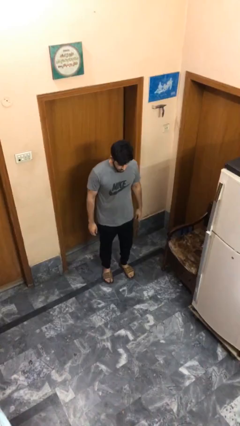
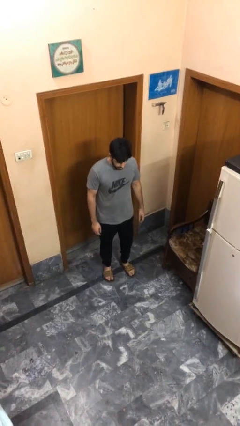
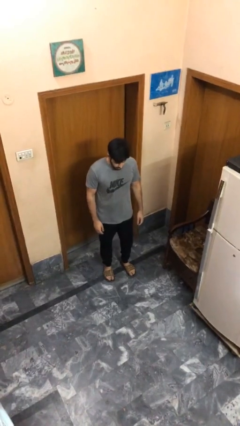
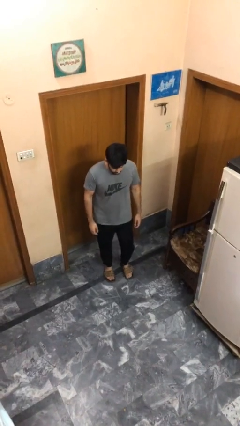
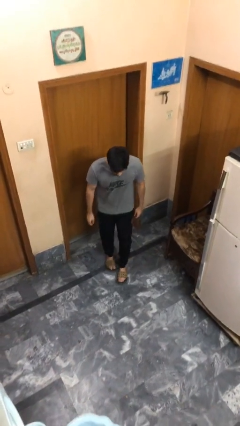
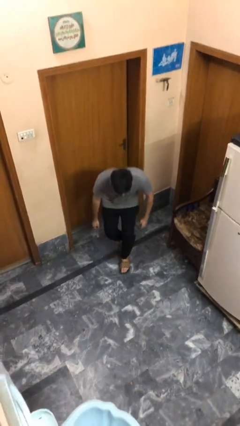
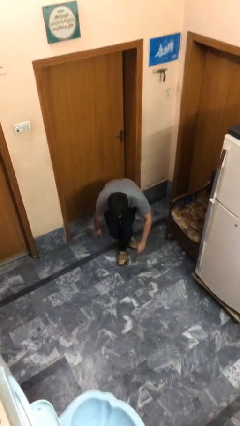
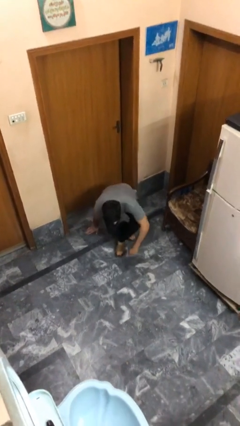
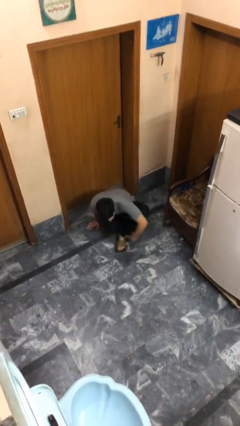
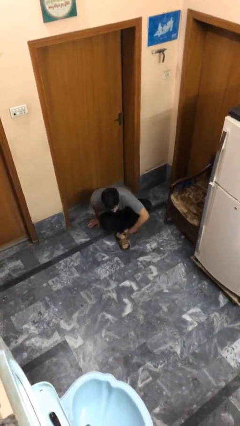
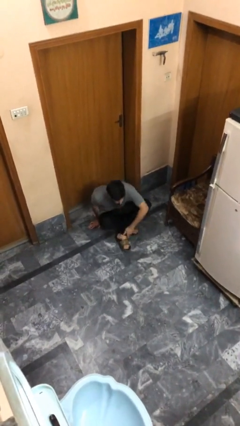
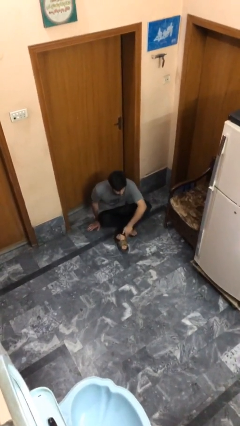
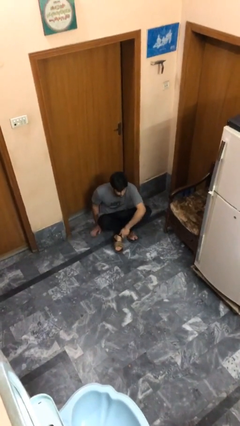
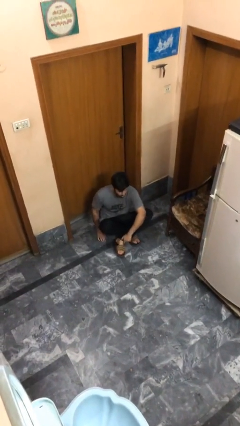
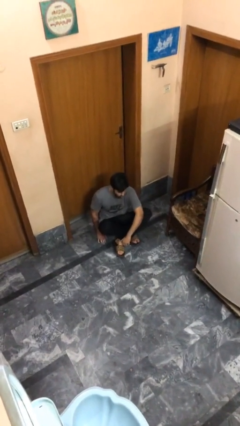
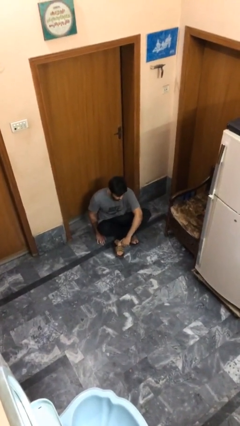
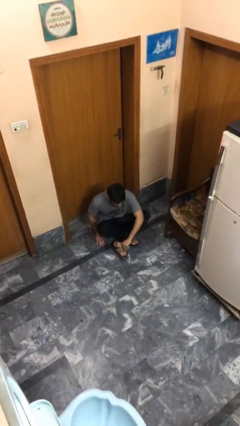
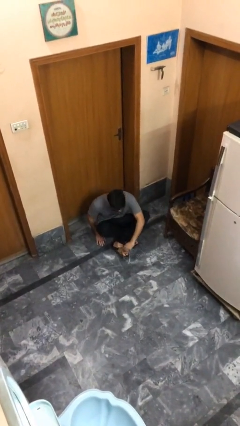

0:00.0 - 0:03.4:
person sits crisscross

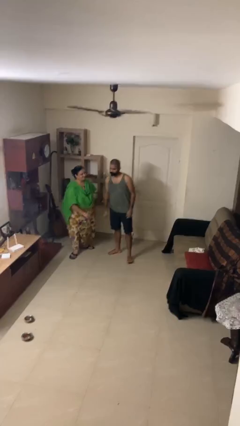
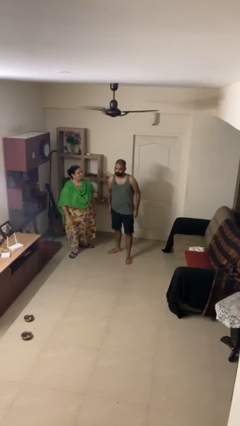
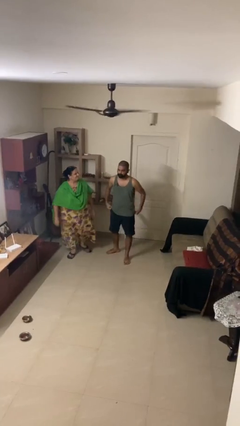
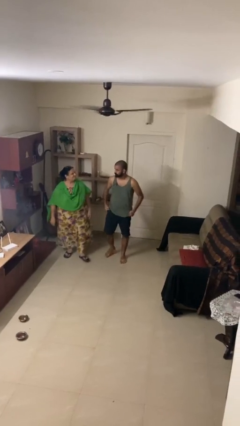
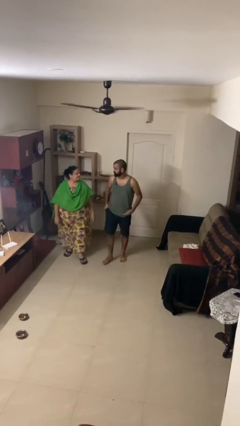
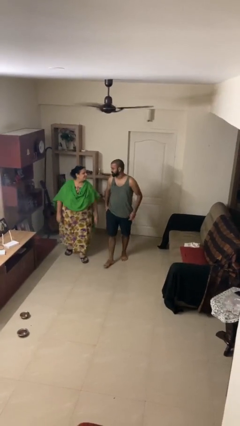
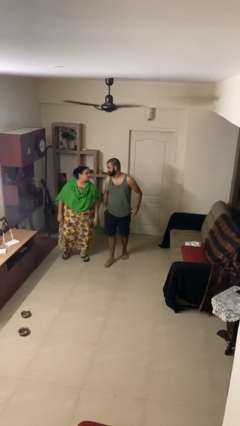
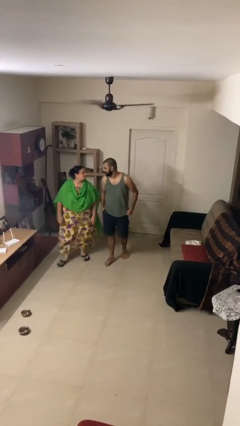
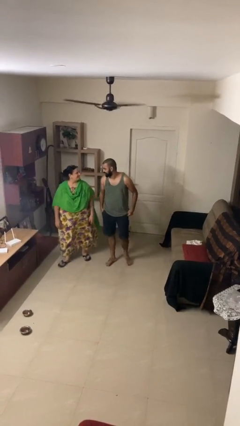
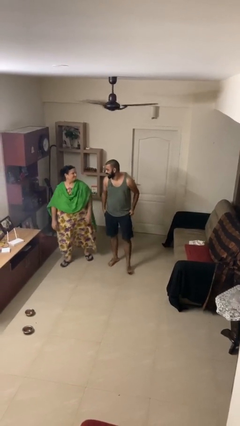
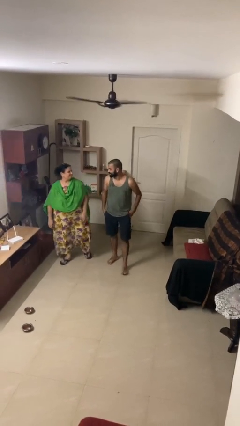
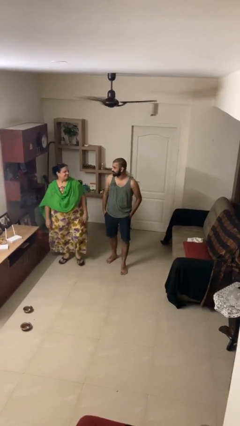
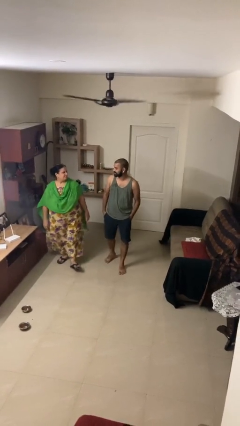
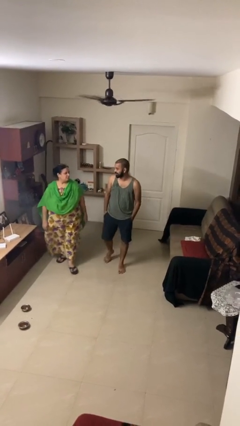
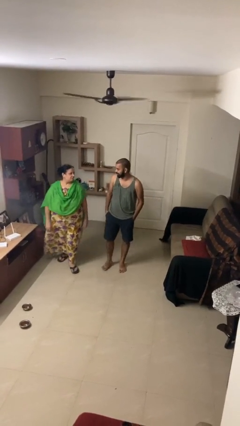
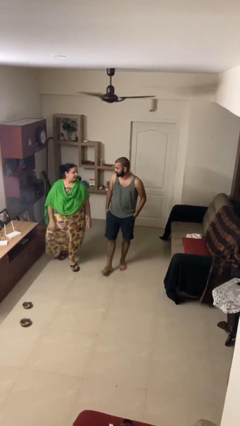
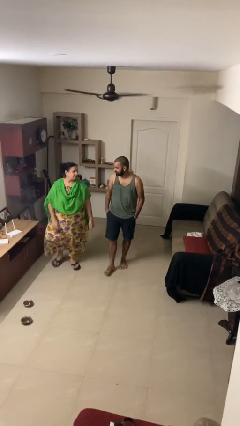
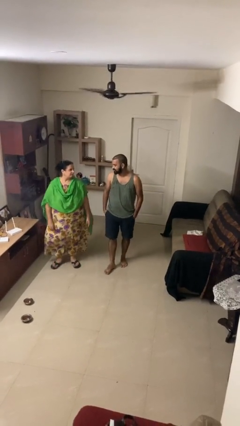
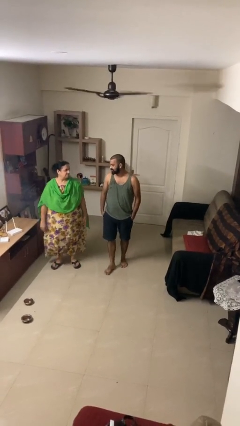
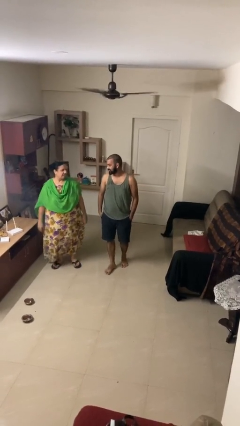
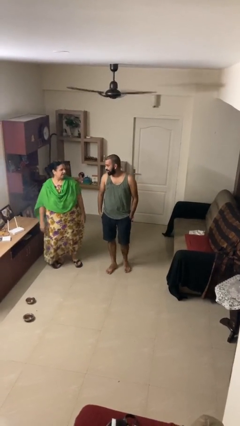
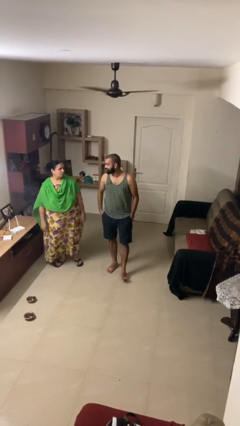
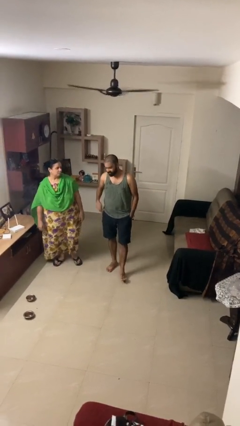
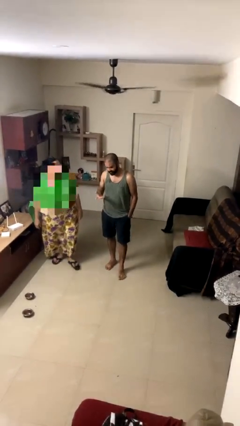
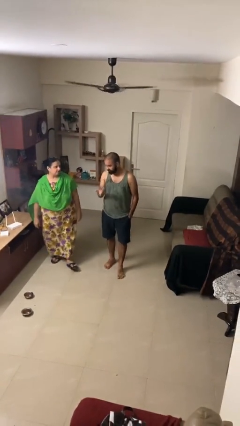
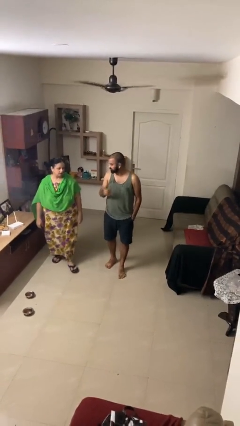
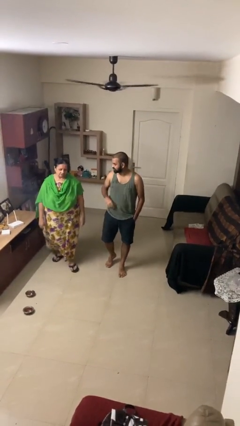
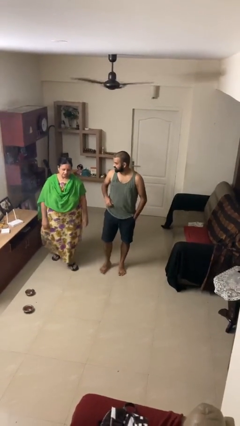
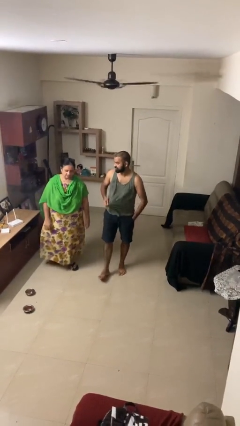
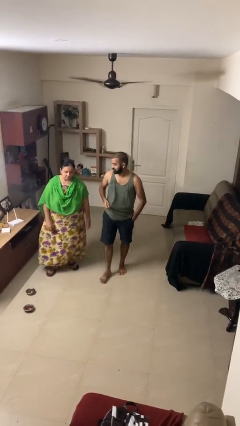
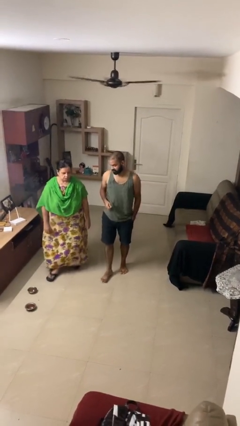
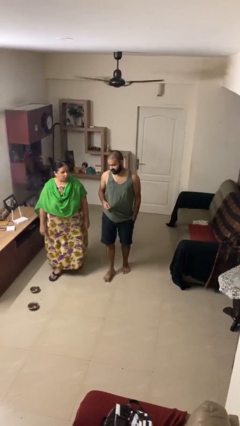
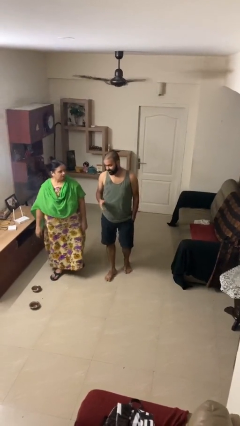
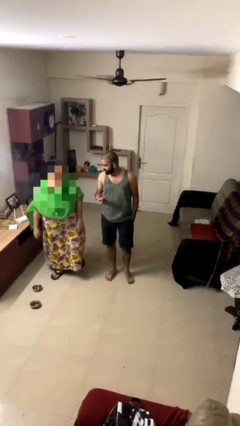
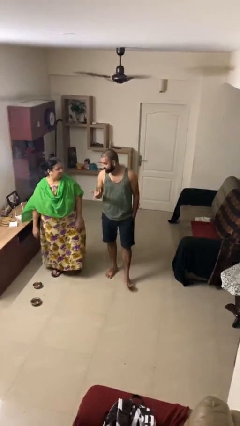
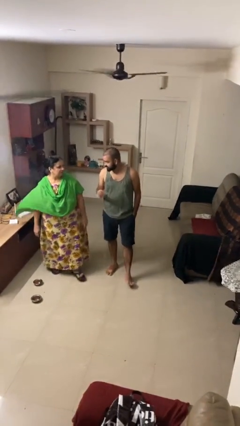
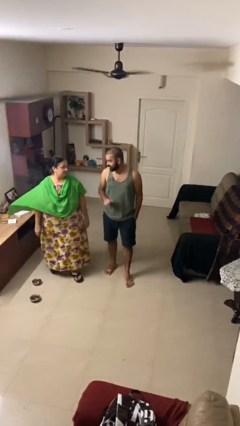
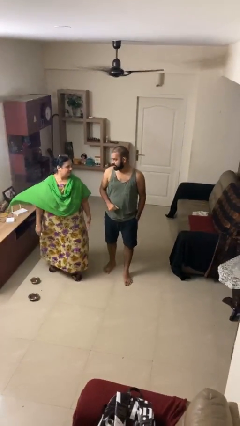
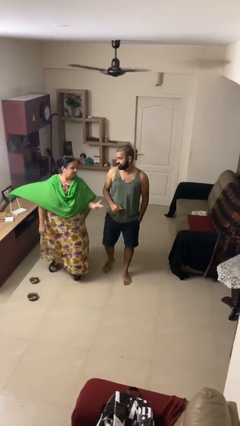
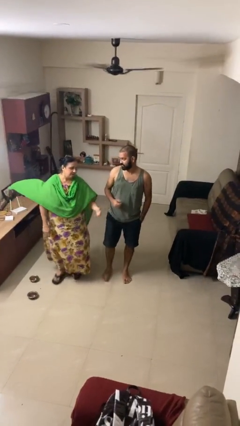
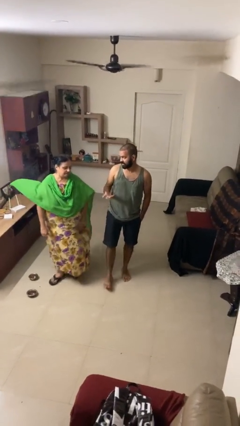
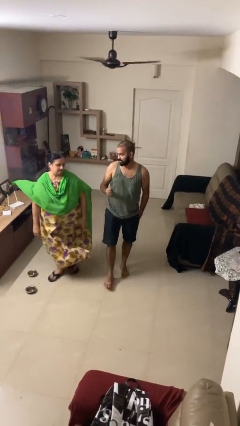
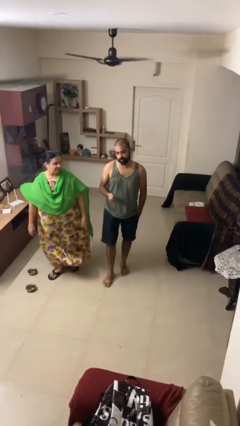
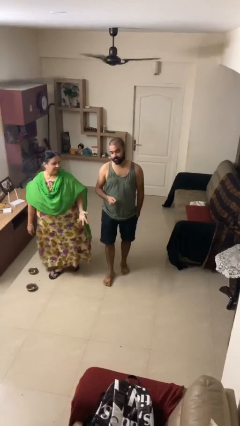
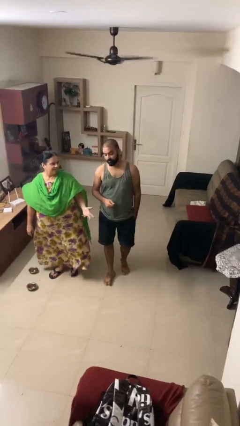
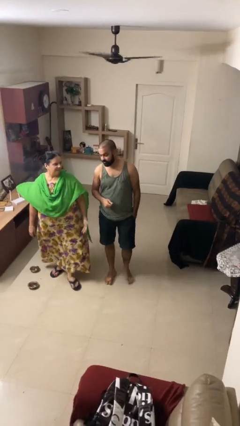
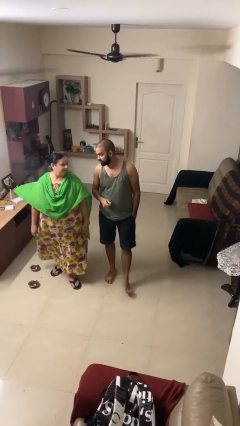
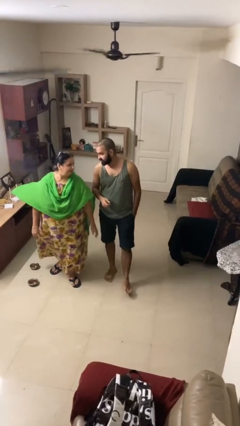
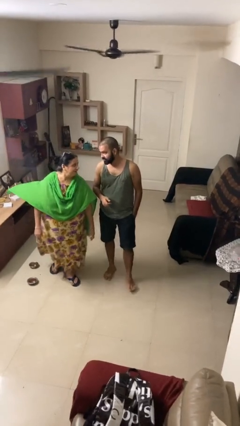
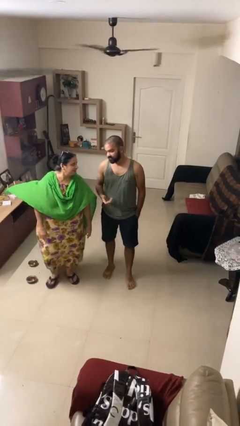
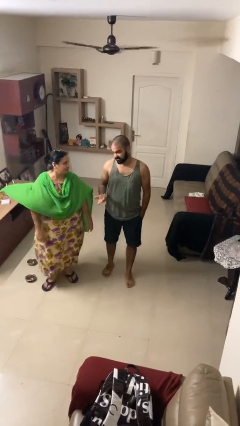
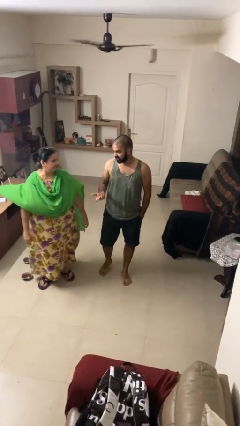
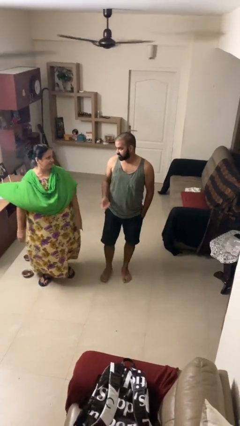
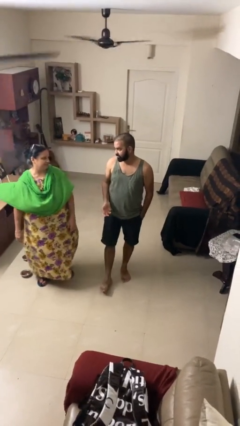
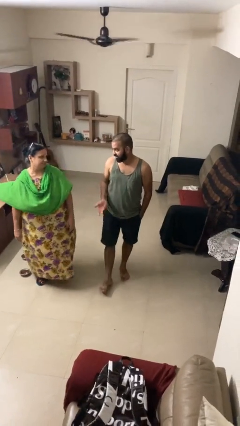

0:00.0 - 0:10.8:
person talks to person

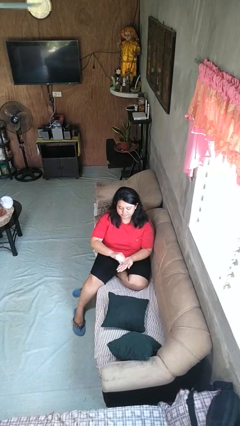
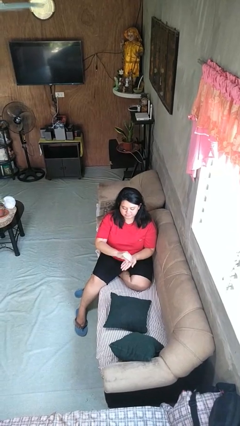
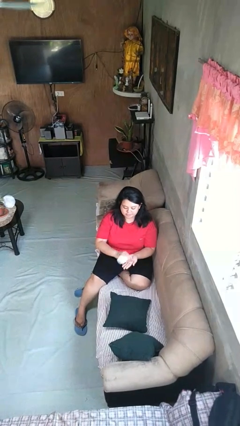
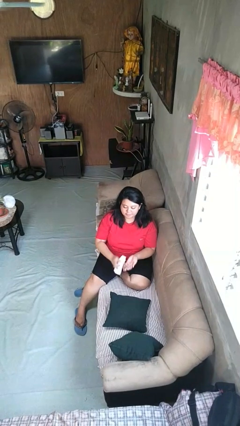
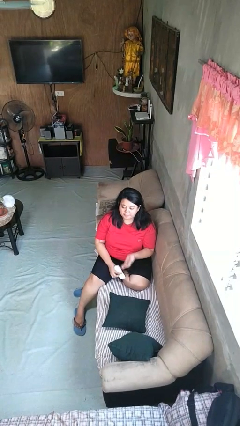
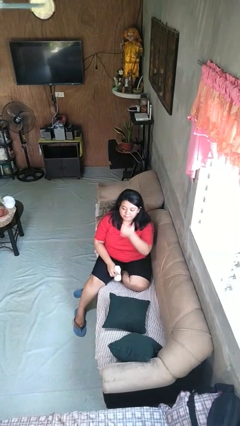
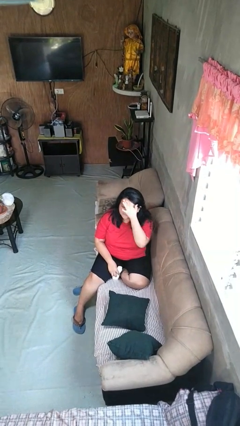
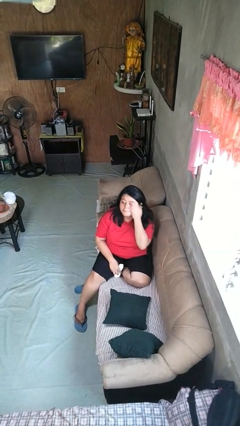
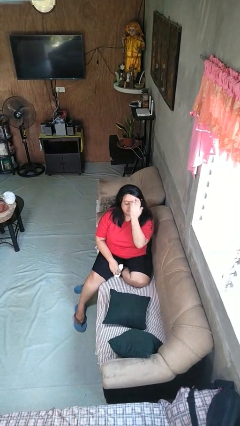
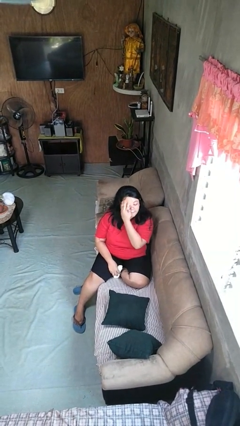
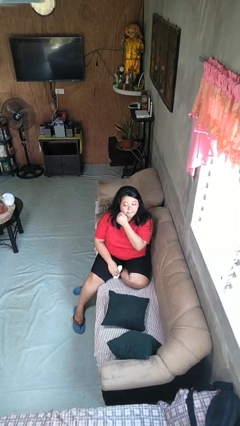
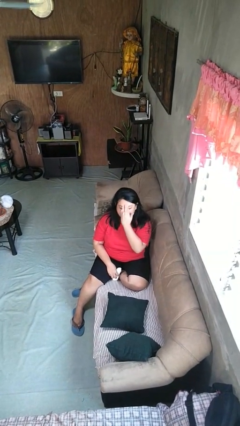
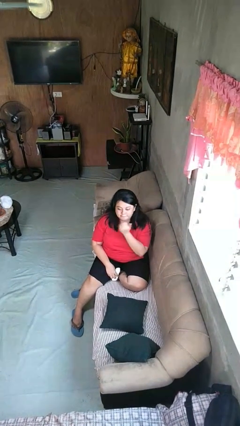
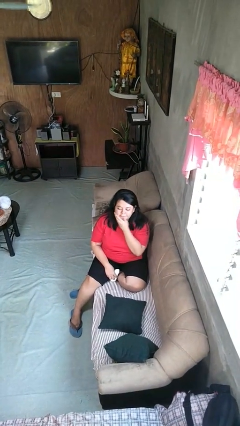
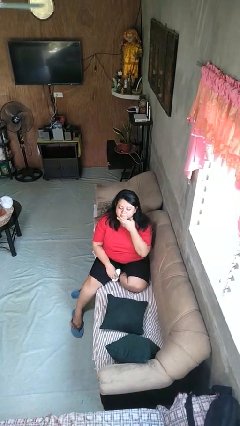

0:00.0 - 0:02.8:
person applies facial moisturizer

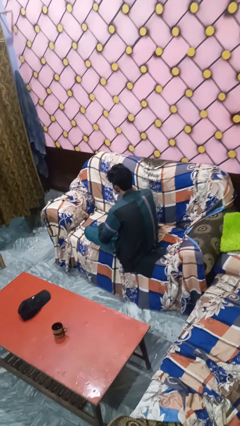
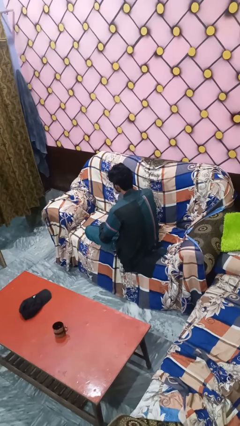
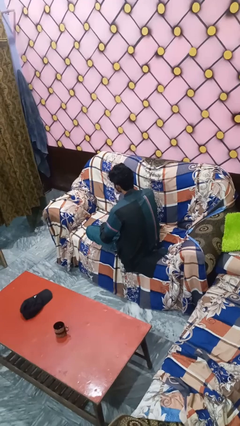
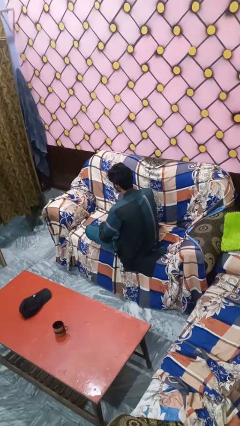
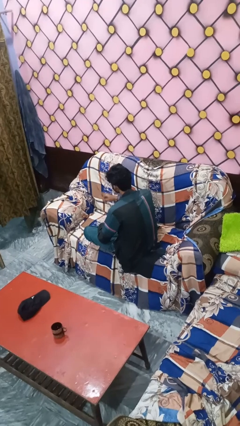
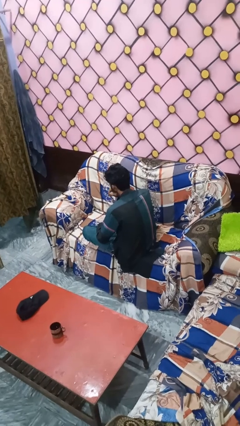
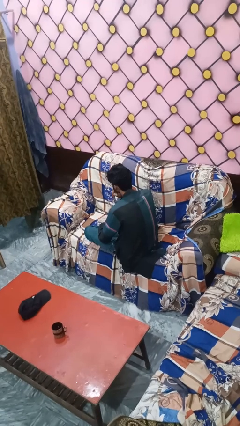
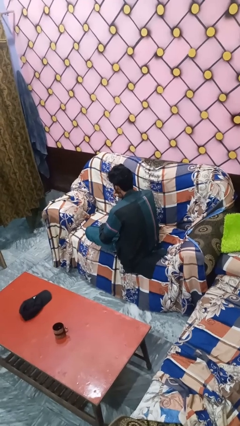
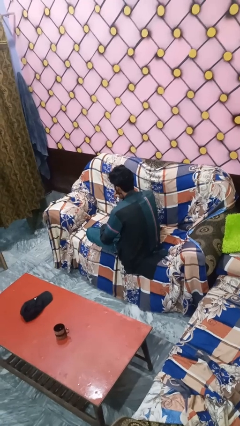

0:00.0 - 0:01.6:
person gestures be quiet
